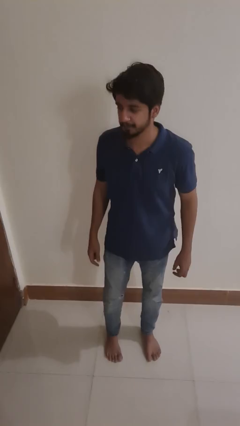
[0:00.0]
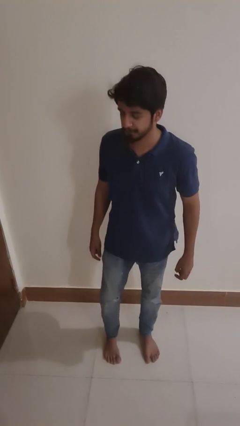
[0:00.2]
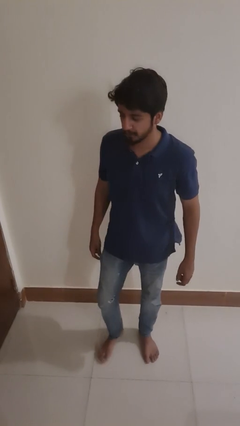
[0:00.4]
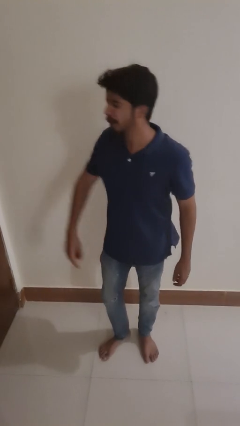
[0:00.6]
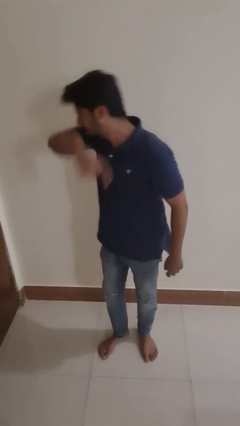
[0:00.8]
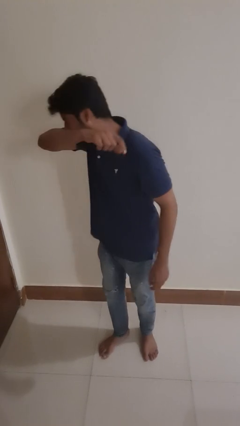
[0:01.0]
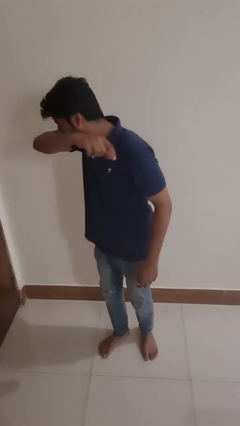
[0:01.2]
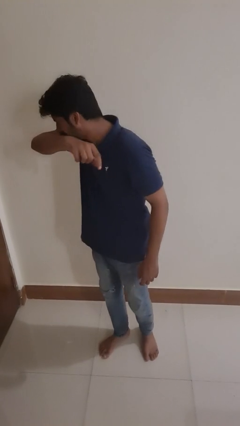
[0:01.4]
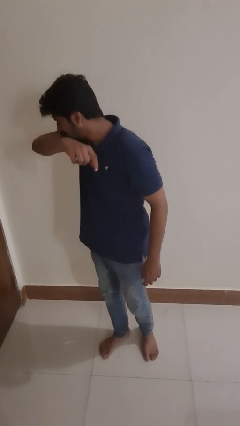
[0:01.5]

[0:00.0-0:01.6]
person sneezes into arm

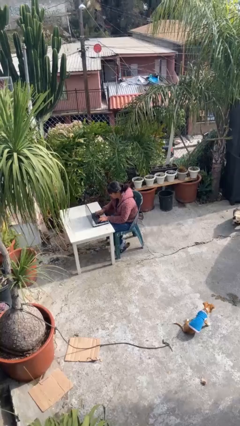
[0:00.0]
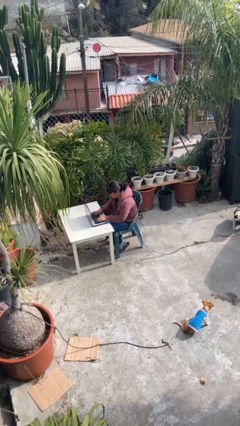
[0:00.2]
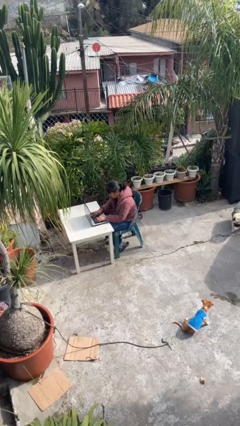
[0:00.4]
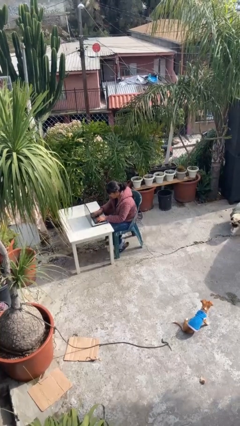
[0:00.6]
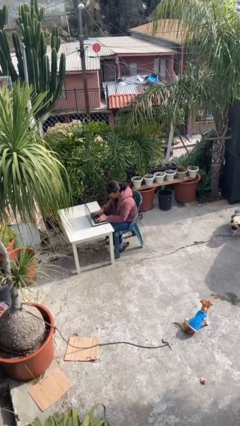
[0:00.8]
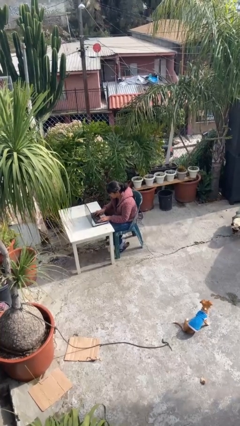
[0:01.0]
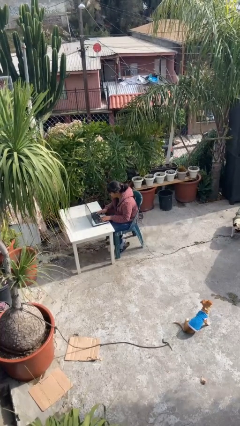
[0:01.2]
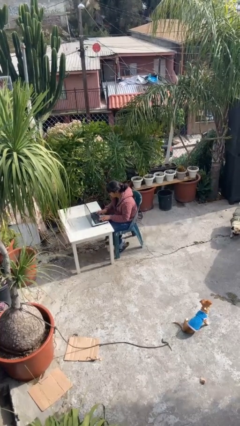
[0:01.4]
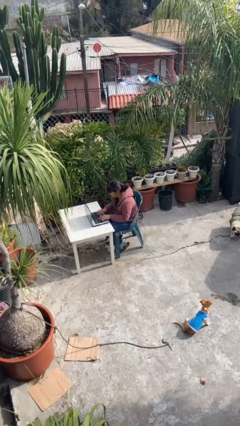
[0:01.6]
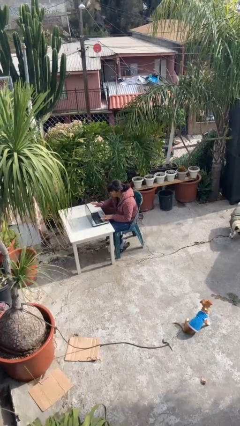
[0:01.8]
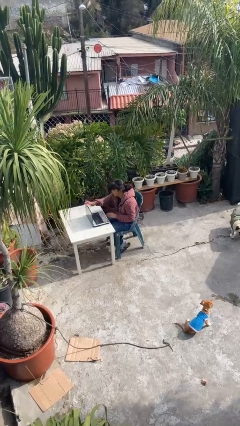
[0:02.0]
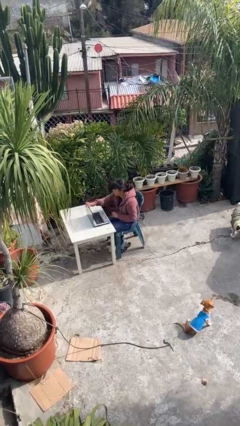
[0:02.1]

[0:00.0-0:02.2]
person interacts with laptop

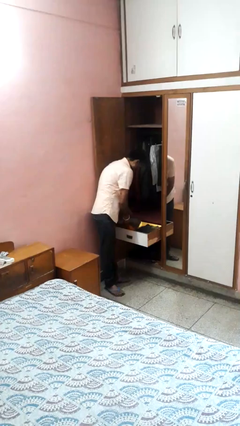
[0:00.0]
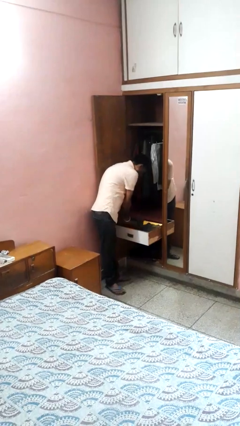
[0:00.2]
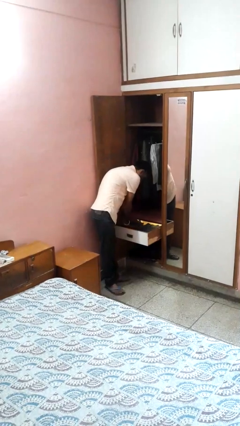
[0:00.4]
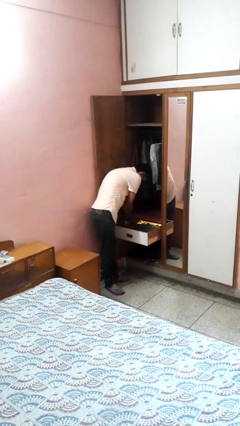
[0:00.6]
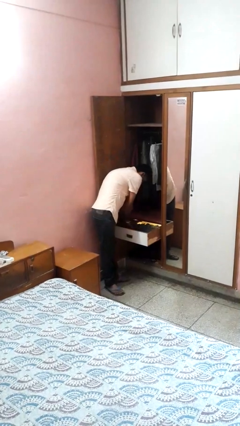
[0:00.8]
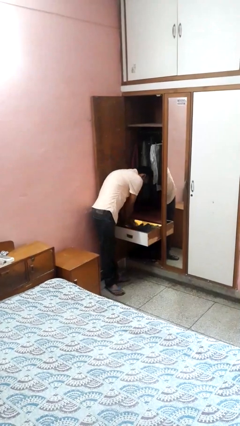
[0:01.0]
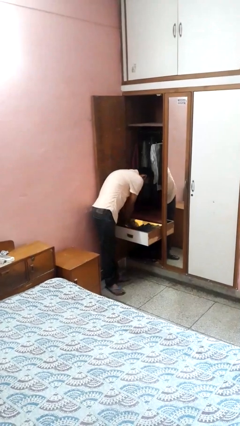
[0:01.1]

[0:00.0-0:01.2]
person puts clothes into dresser

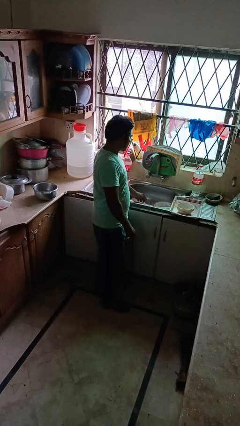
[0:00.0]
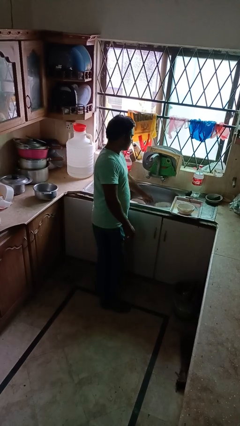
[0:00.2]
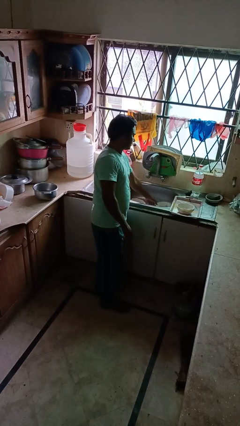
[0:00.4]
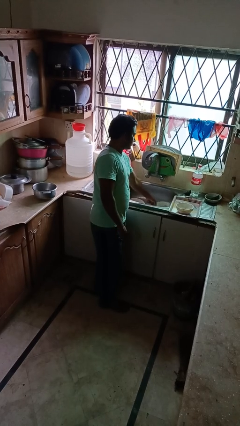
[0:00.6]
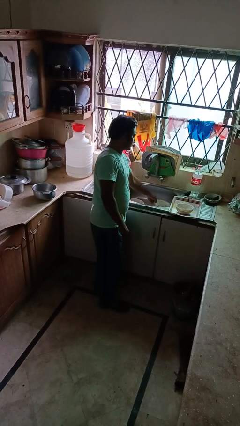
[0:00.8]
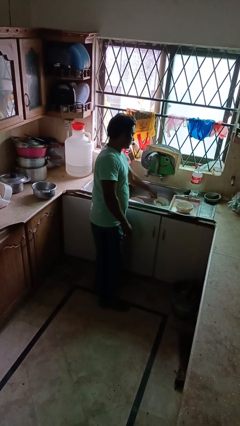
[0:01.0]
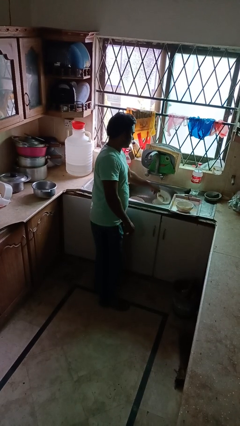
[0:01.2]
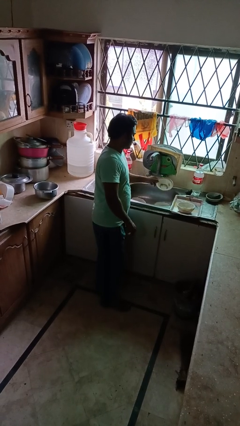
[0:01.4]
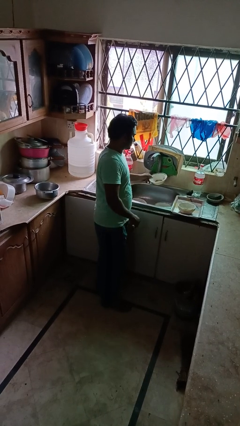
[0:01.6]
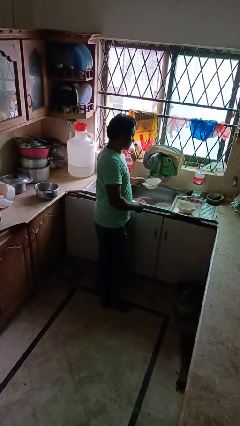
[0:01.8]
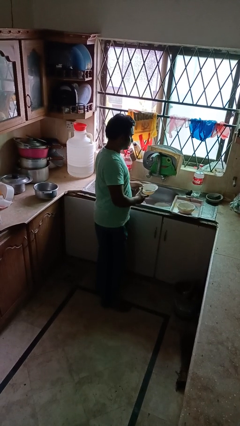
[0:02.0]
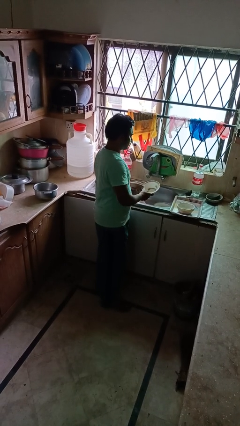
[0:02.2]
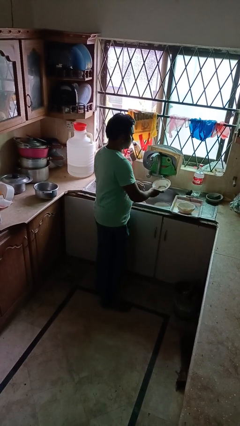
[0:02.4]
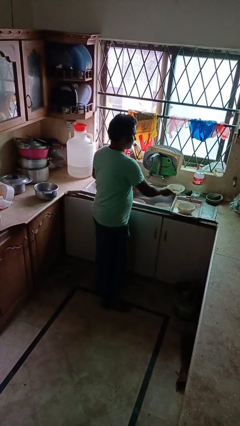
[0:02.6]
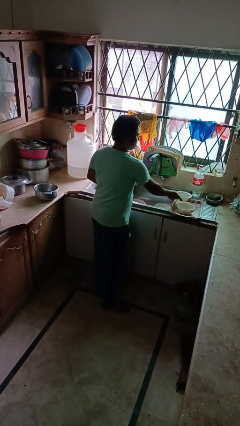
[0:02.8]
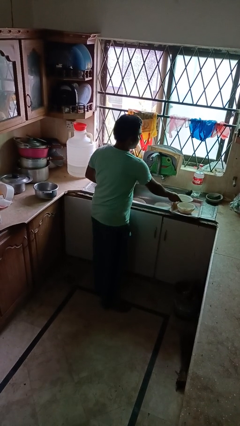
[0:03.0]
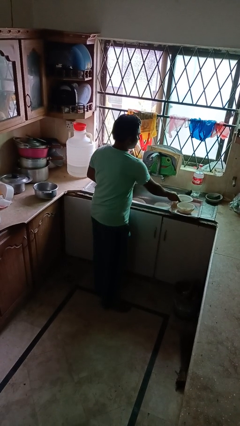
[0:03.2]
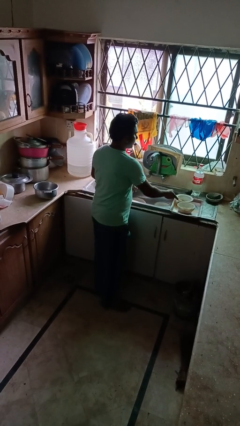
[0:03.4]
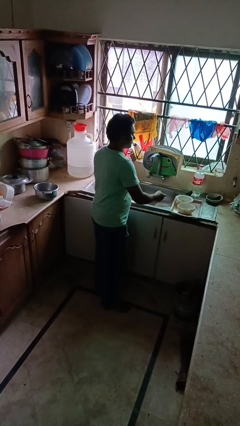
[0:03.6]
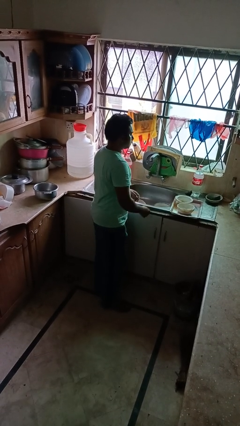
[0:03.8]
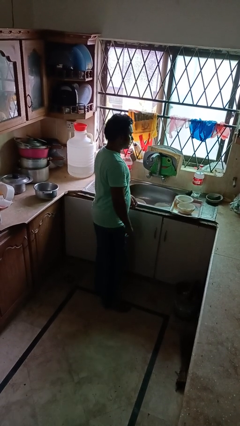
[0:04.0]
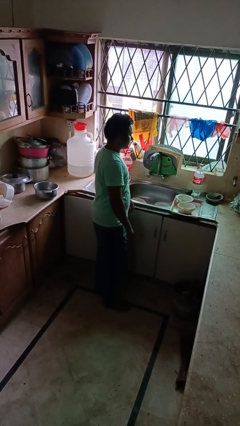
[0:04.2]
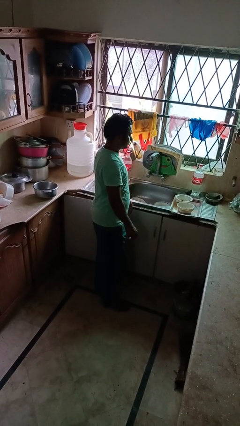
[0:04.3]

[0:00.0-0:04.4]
person unloads dishwasher

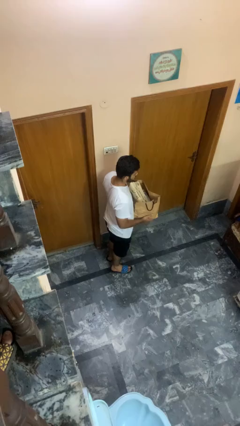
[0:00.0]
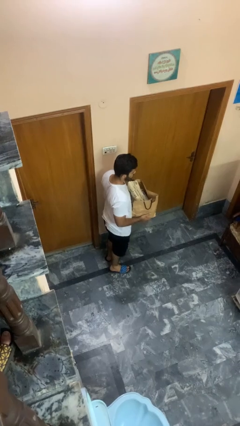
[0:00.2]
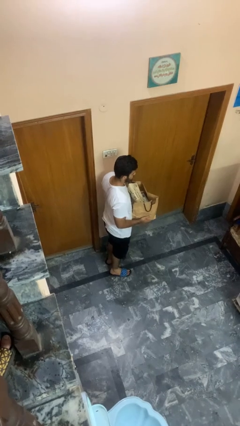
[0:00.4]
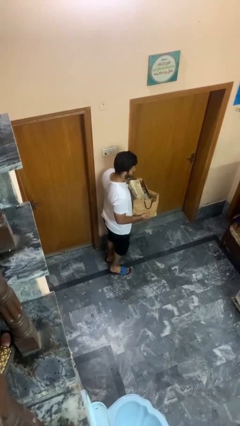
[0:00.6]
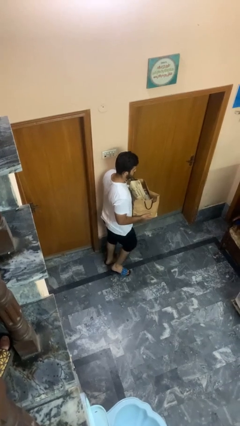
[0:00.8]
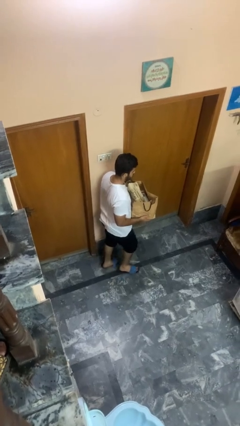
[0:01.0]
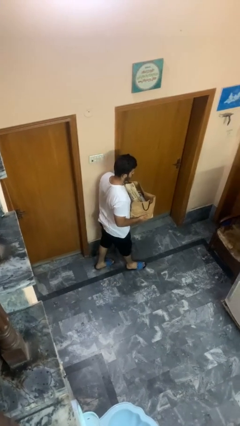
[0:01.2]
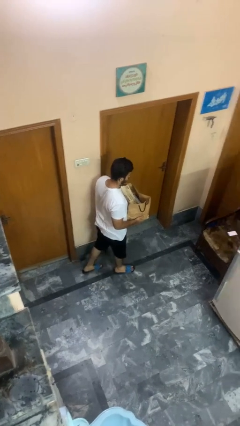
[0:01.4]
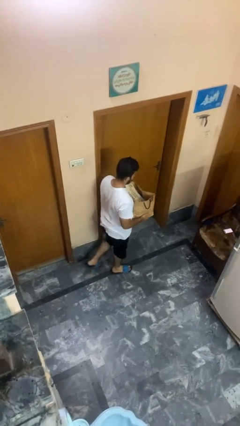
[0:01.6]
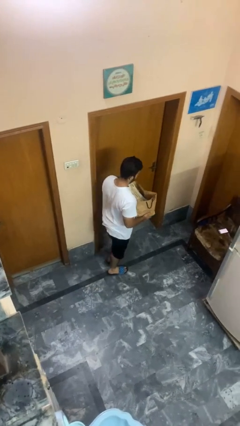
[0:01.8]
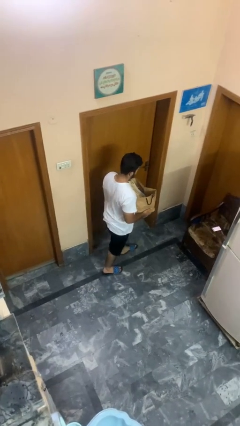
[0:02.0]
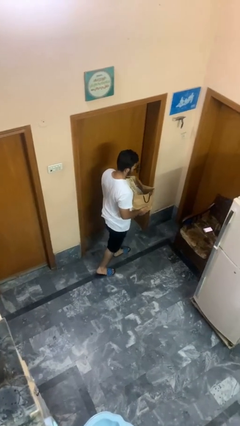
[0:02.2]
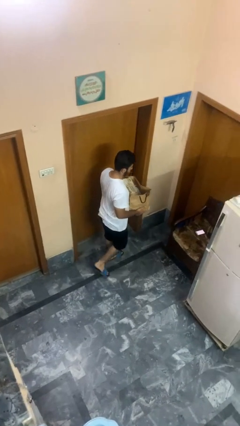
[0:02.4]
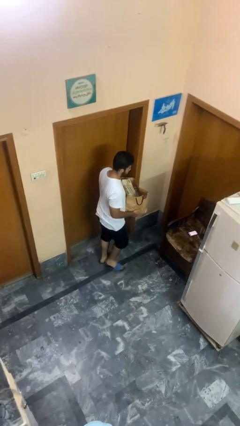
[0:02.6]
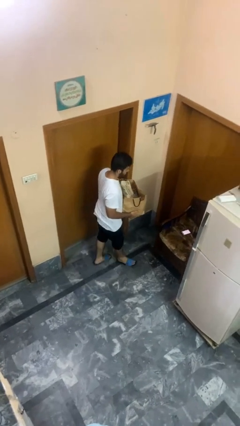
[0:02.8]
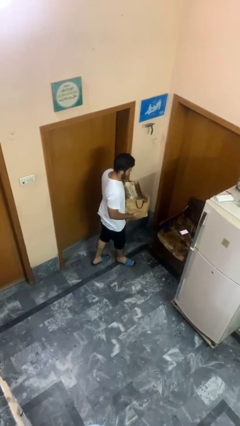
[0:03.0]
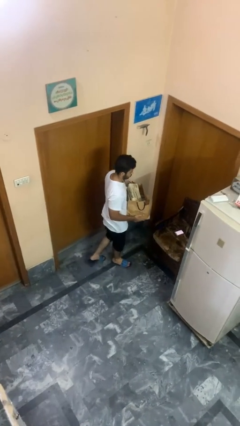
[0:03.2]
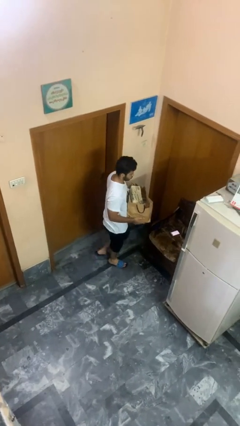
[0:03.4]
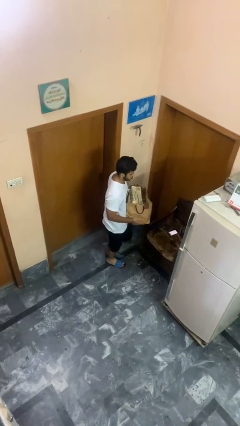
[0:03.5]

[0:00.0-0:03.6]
person carries groceries

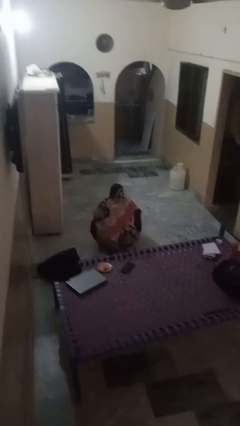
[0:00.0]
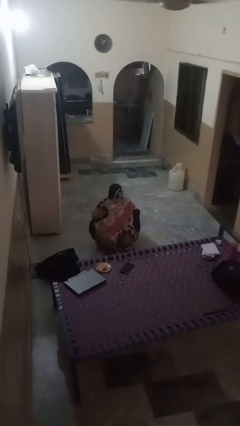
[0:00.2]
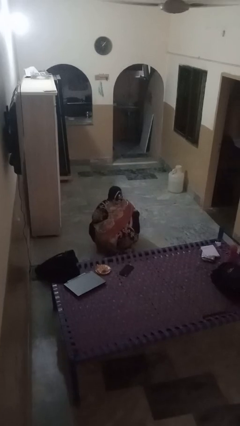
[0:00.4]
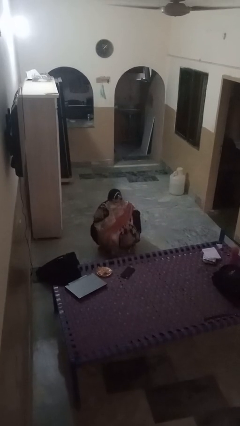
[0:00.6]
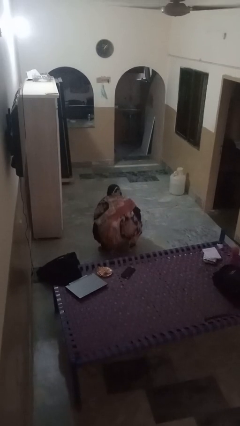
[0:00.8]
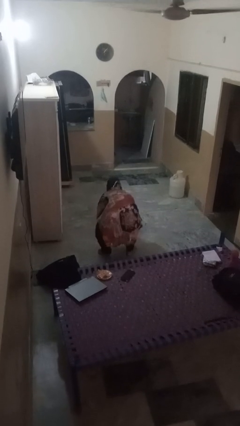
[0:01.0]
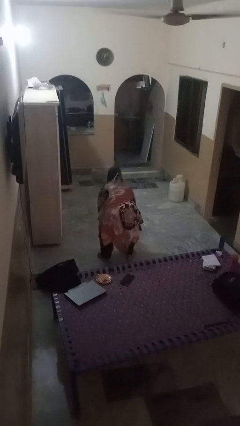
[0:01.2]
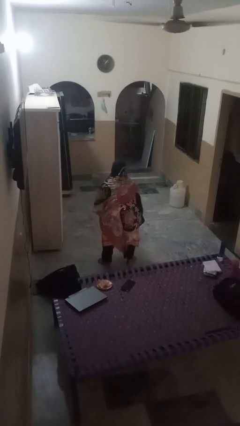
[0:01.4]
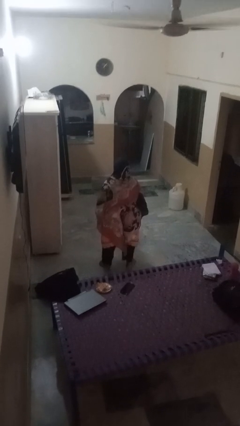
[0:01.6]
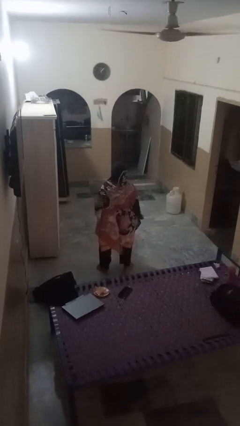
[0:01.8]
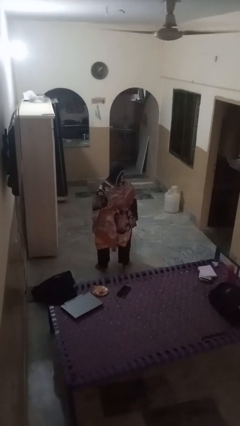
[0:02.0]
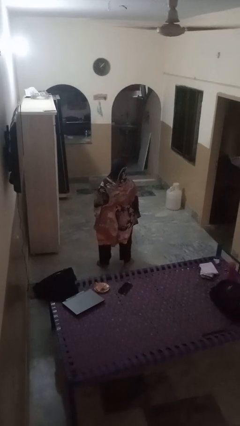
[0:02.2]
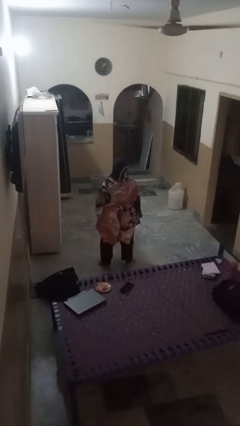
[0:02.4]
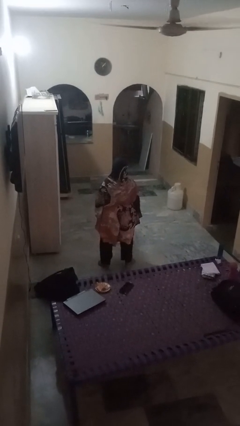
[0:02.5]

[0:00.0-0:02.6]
person stands up

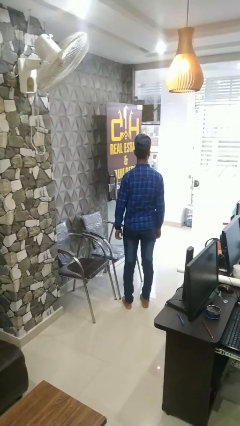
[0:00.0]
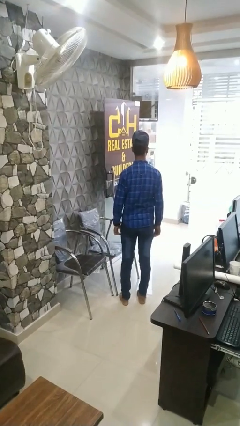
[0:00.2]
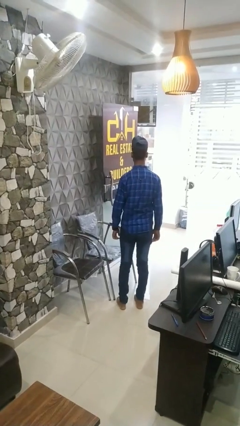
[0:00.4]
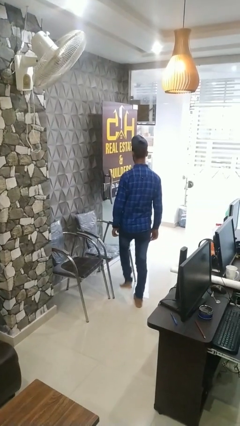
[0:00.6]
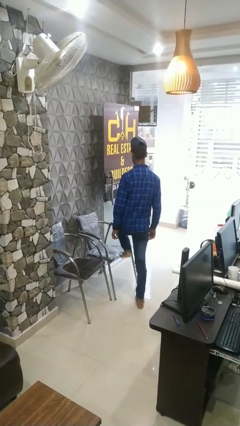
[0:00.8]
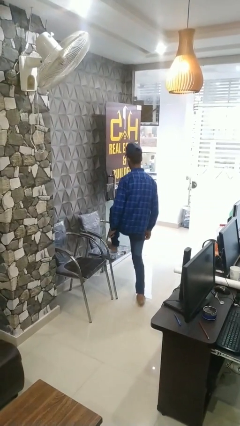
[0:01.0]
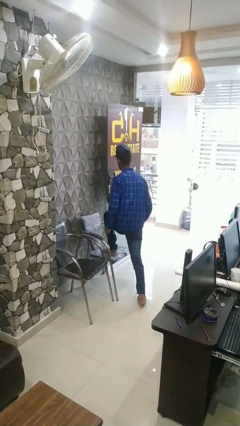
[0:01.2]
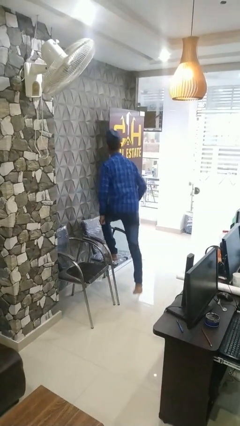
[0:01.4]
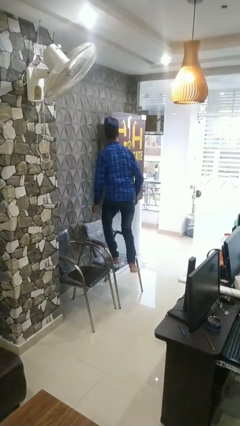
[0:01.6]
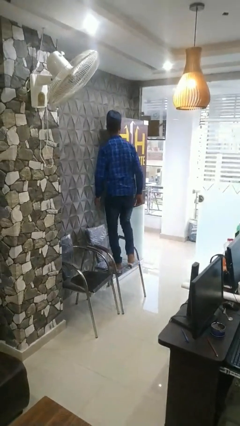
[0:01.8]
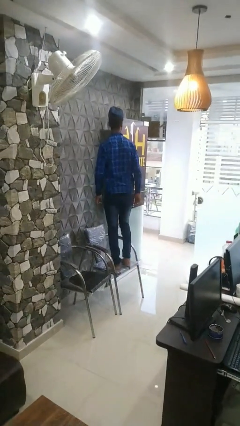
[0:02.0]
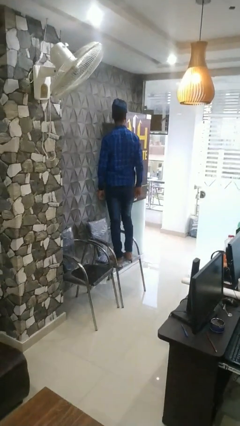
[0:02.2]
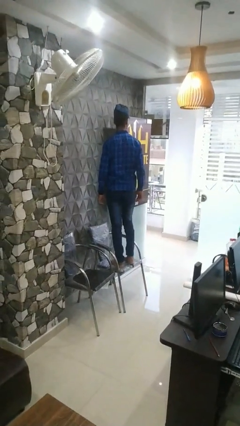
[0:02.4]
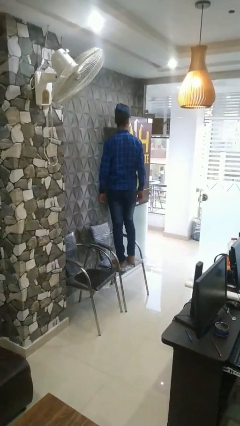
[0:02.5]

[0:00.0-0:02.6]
person climbs on chair
